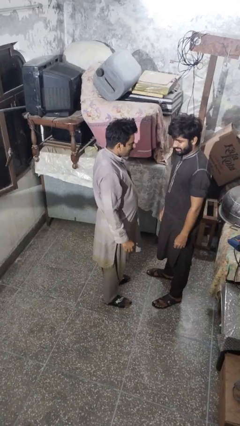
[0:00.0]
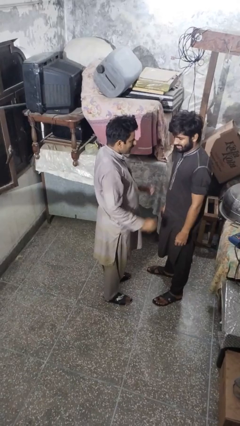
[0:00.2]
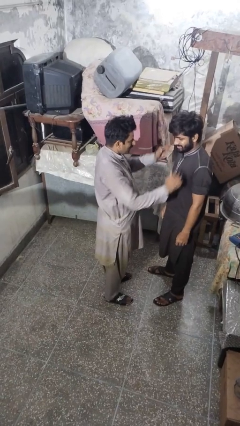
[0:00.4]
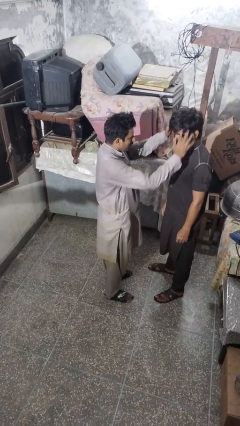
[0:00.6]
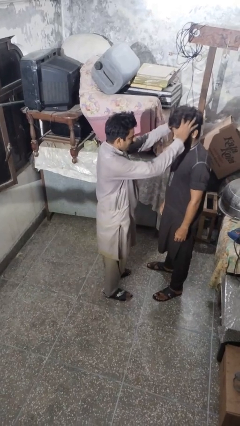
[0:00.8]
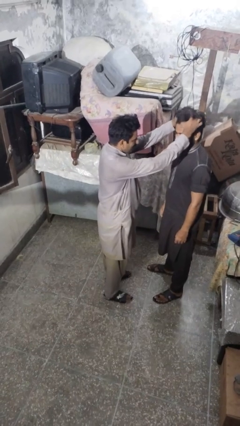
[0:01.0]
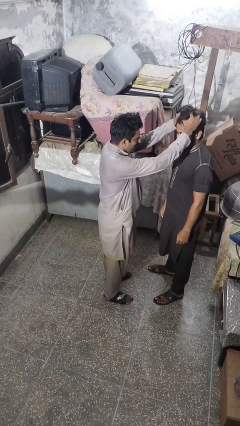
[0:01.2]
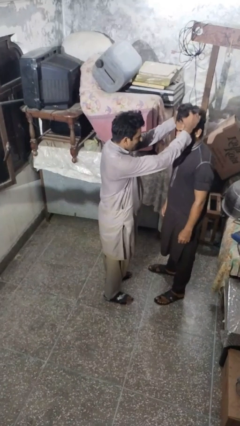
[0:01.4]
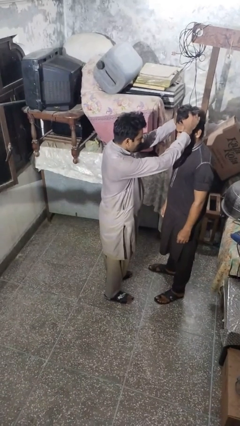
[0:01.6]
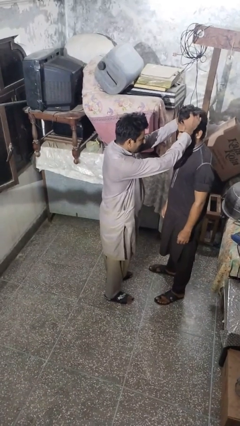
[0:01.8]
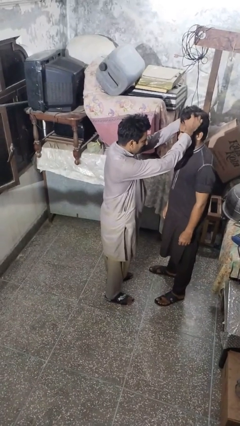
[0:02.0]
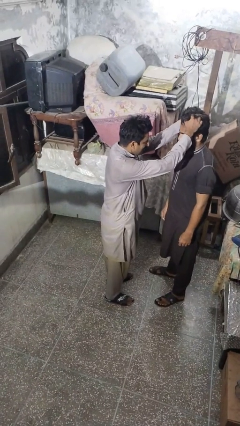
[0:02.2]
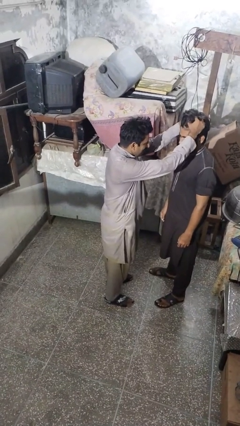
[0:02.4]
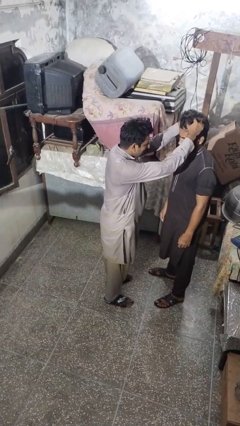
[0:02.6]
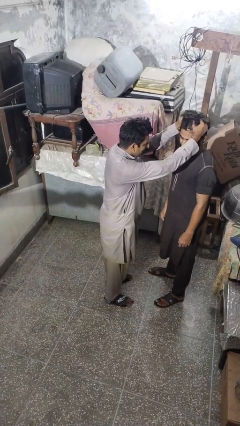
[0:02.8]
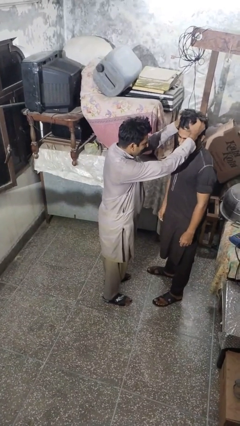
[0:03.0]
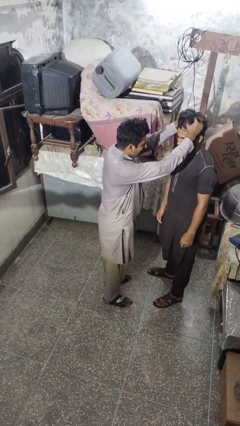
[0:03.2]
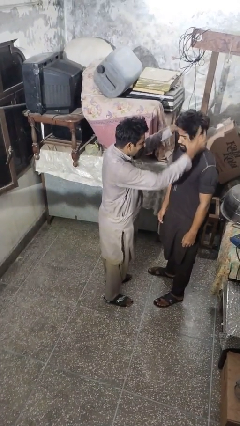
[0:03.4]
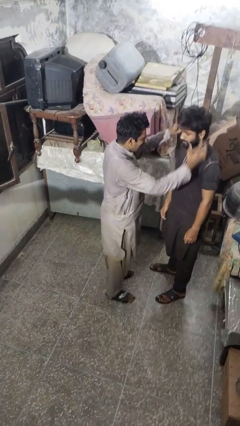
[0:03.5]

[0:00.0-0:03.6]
person grabs person by hair

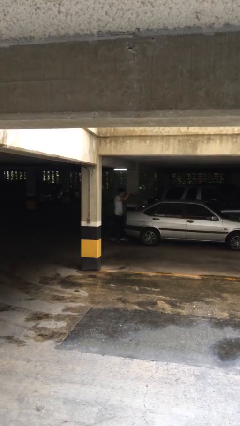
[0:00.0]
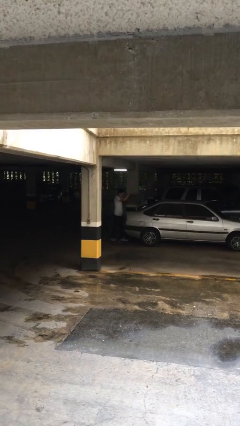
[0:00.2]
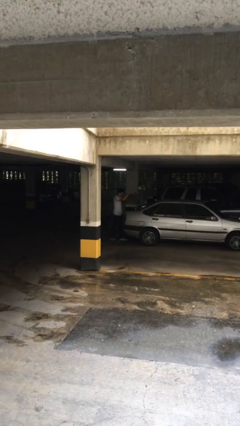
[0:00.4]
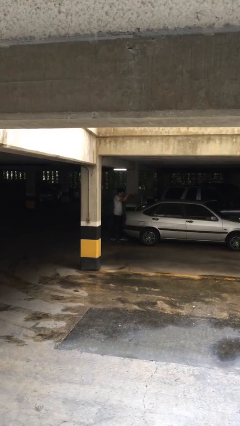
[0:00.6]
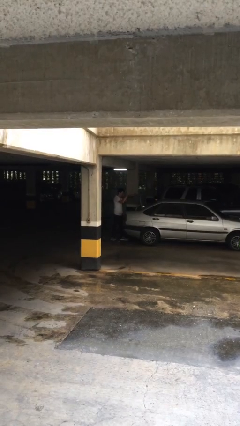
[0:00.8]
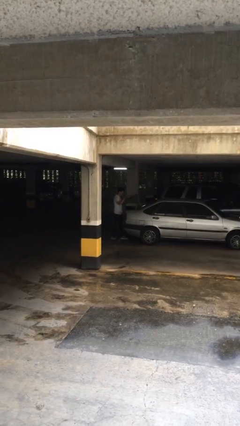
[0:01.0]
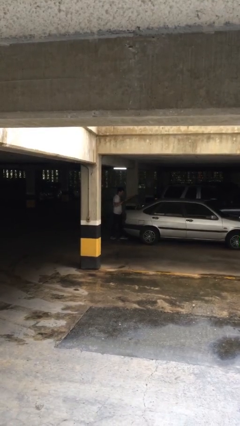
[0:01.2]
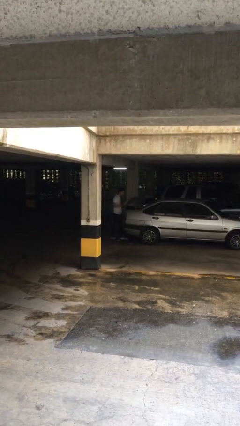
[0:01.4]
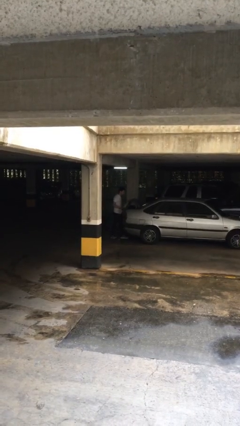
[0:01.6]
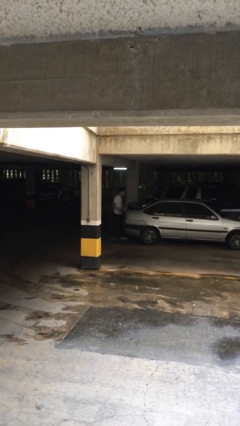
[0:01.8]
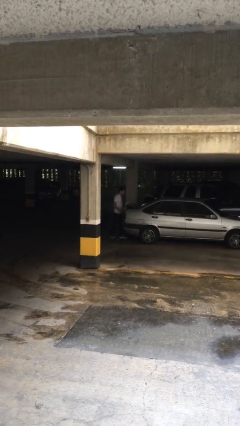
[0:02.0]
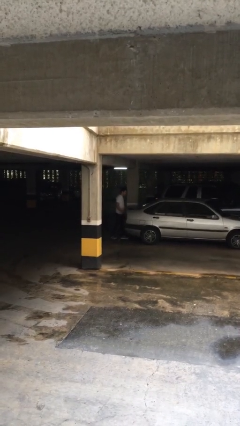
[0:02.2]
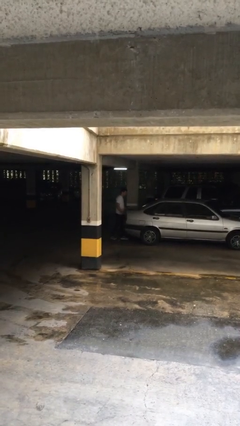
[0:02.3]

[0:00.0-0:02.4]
person closes car trunk

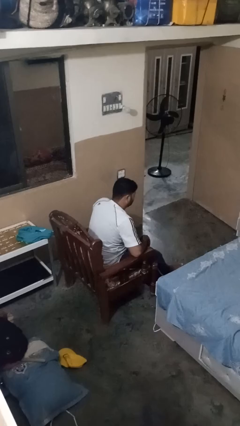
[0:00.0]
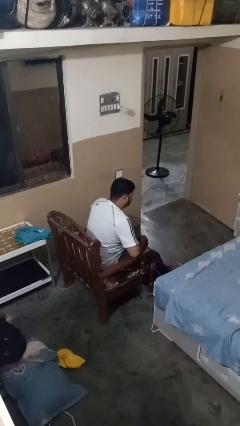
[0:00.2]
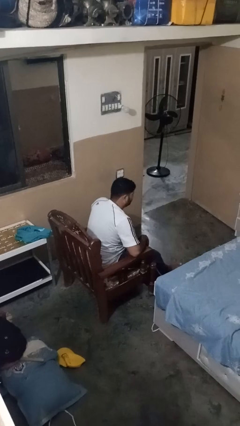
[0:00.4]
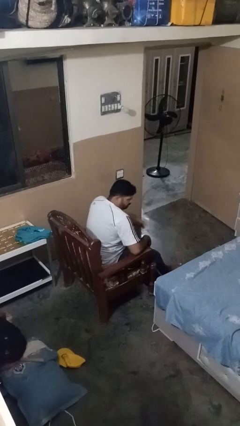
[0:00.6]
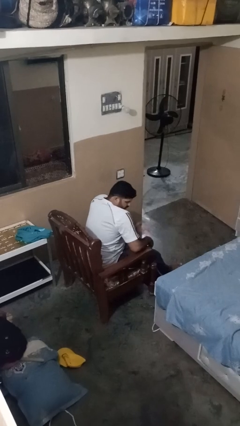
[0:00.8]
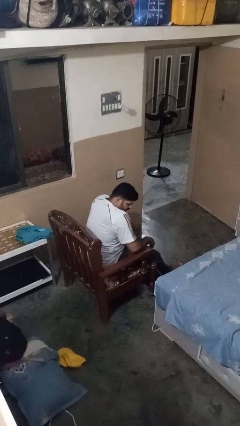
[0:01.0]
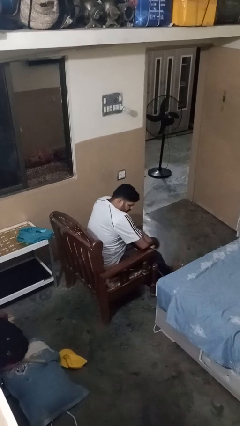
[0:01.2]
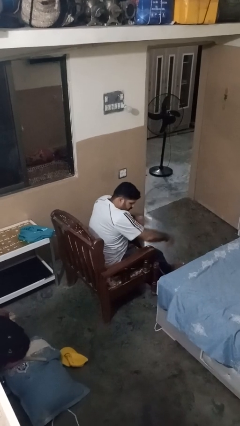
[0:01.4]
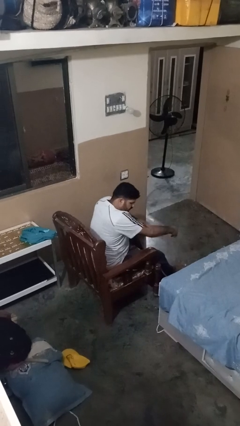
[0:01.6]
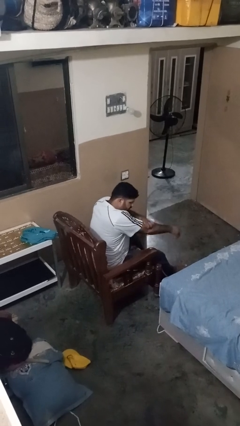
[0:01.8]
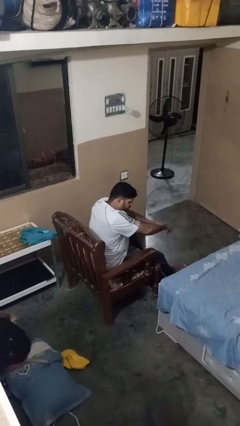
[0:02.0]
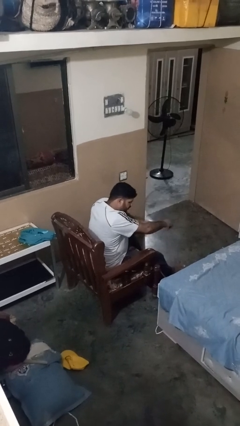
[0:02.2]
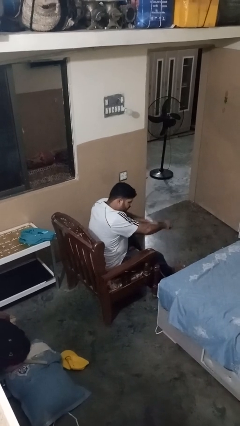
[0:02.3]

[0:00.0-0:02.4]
person swats bug

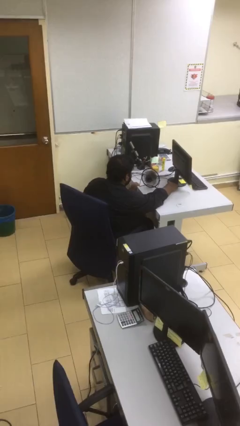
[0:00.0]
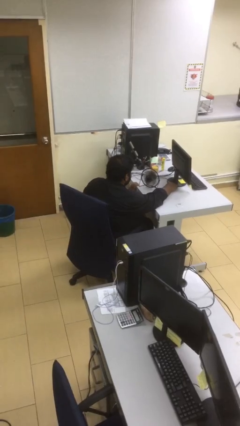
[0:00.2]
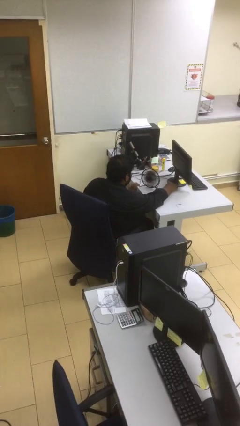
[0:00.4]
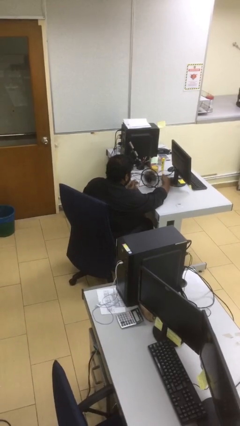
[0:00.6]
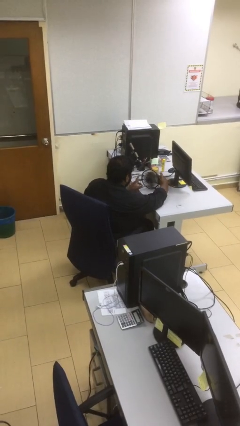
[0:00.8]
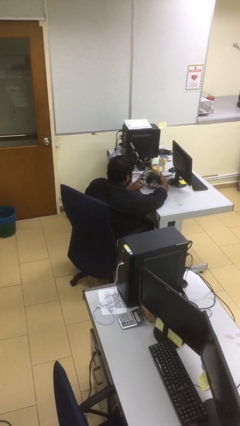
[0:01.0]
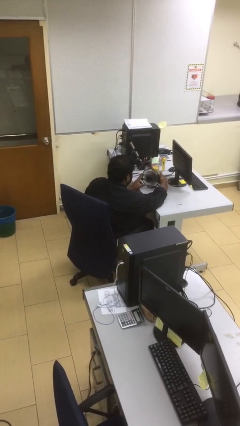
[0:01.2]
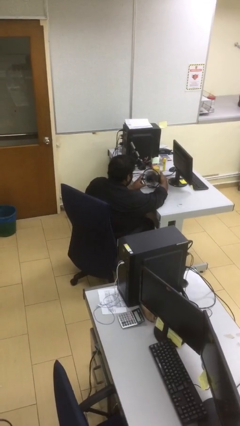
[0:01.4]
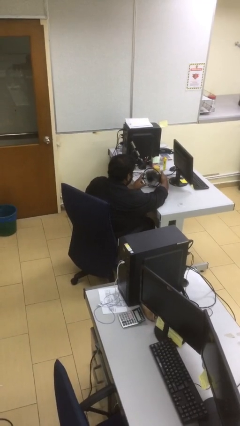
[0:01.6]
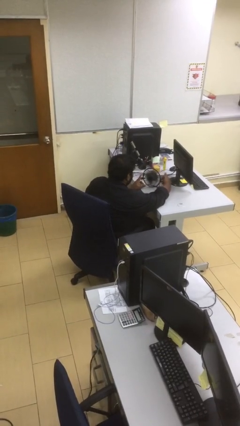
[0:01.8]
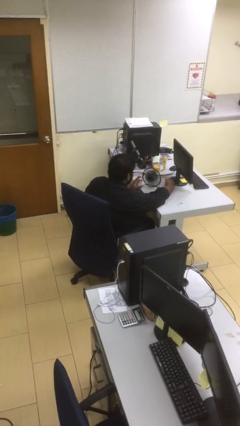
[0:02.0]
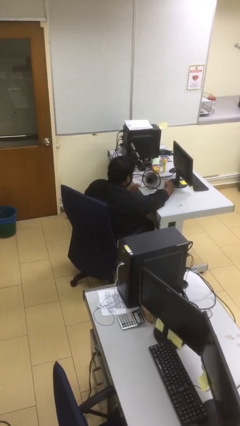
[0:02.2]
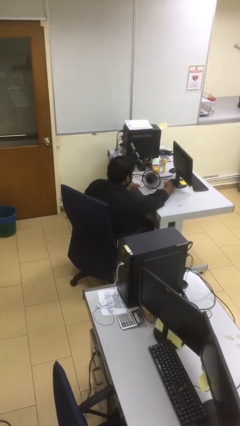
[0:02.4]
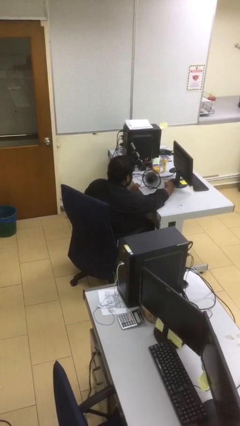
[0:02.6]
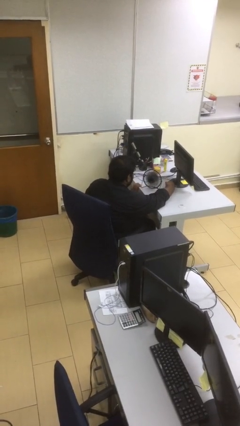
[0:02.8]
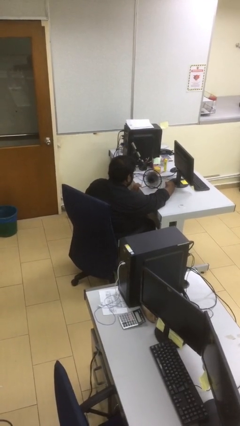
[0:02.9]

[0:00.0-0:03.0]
person turns on fan

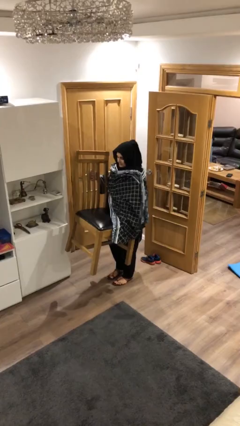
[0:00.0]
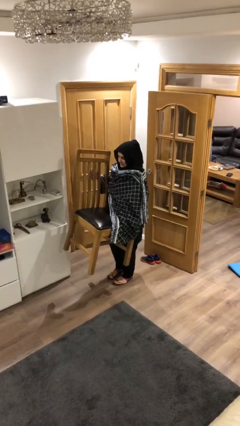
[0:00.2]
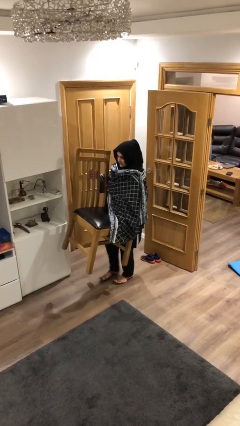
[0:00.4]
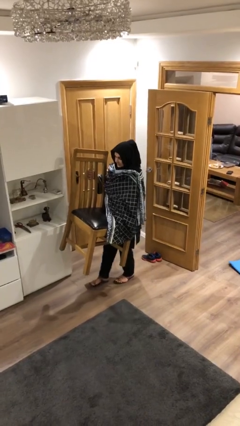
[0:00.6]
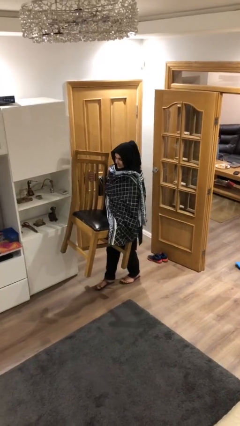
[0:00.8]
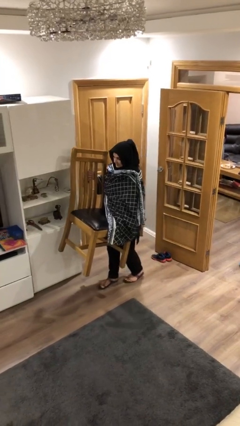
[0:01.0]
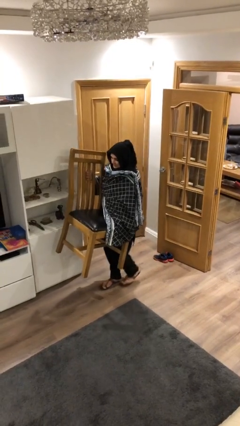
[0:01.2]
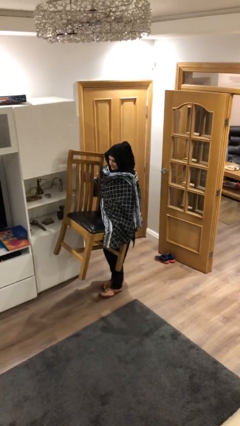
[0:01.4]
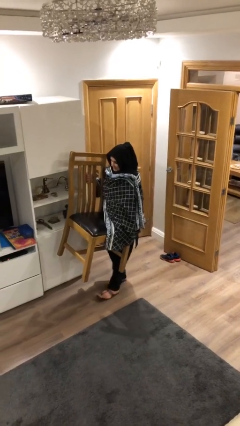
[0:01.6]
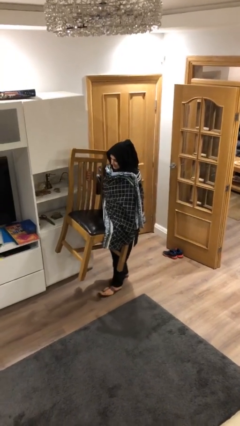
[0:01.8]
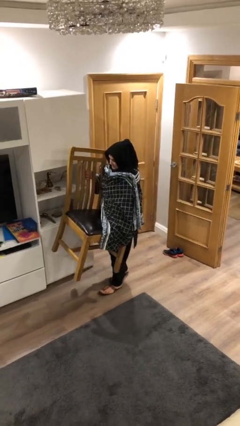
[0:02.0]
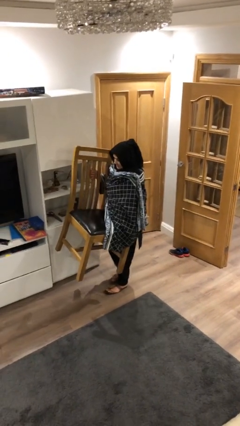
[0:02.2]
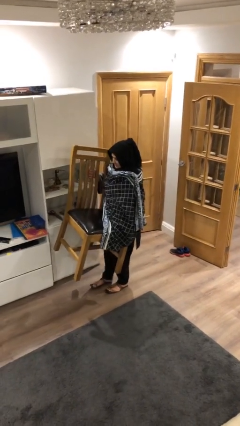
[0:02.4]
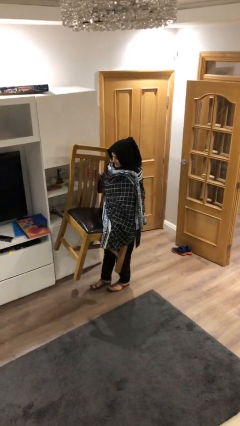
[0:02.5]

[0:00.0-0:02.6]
person carries heavy object

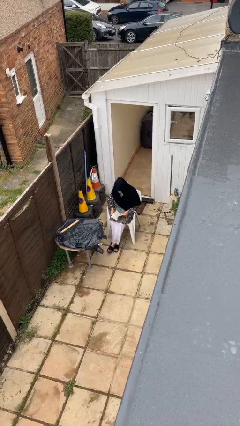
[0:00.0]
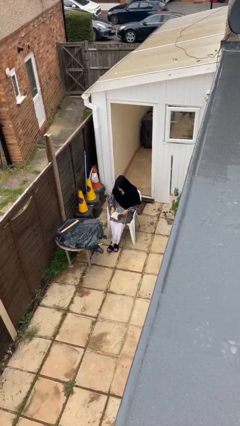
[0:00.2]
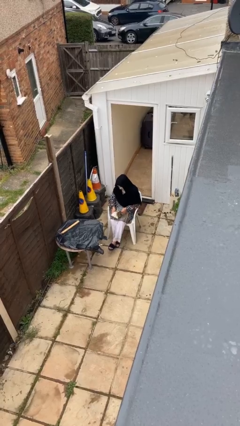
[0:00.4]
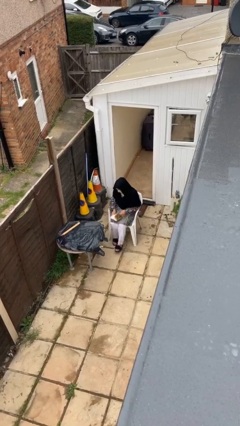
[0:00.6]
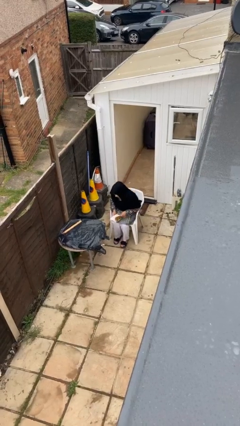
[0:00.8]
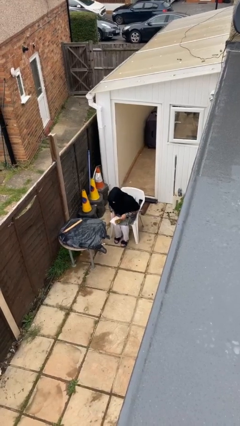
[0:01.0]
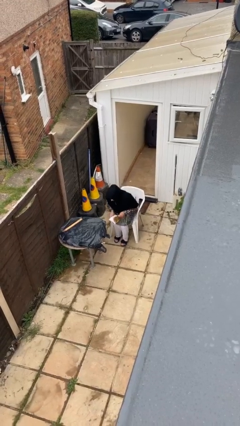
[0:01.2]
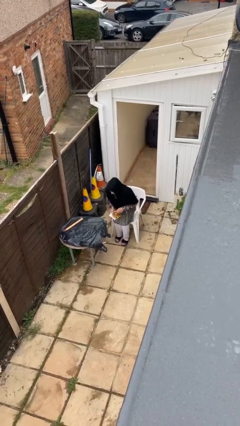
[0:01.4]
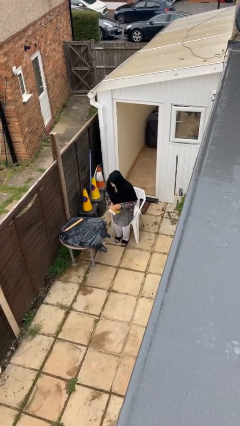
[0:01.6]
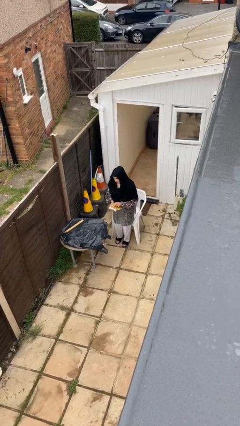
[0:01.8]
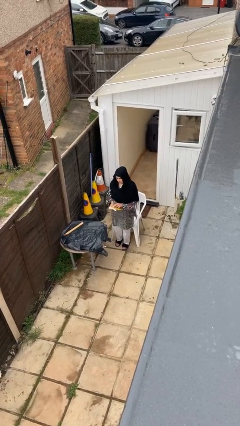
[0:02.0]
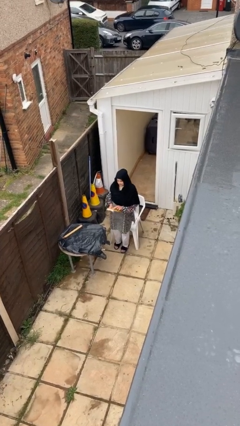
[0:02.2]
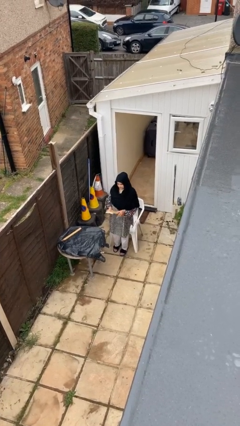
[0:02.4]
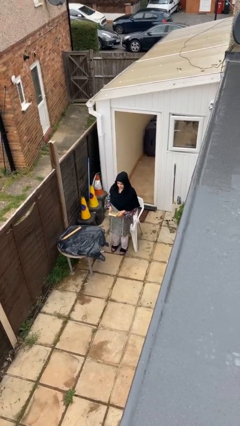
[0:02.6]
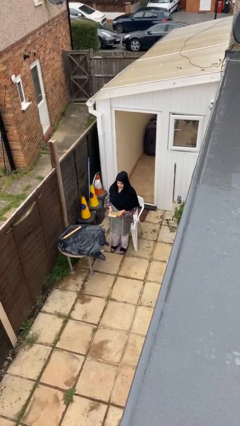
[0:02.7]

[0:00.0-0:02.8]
person stands up

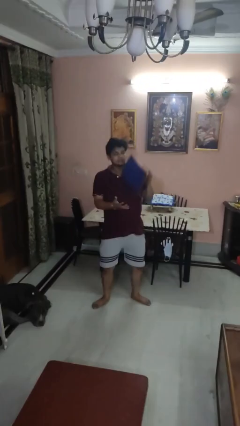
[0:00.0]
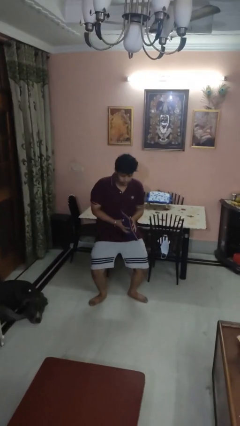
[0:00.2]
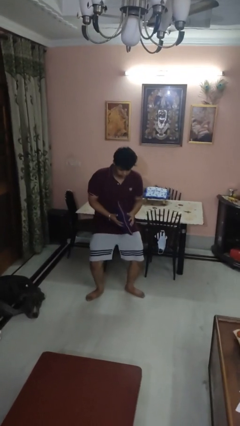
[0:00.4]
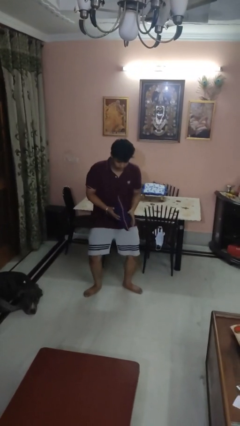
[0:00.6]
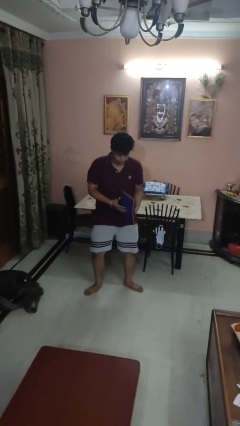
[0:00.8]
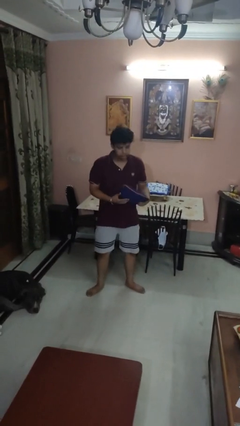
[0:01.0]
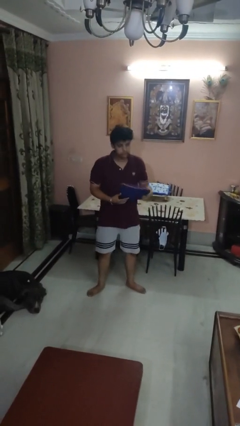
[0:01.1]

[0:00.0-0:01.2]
person catches dropped object
